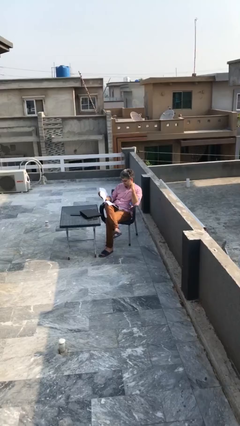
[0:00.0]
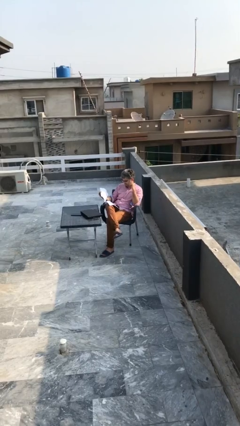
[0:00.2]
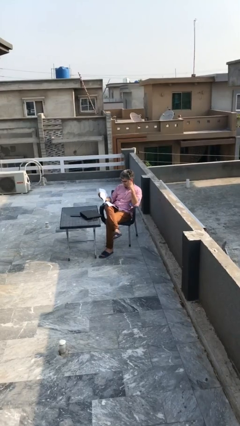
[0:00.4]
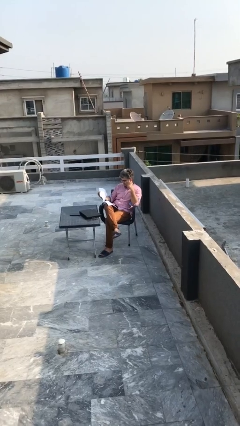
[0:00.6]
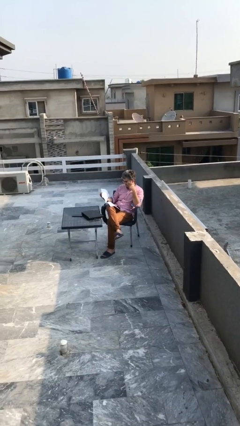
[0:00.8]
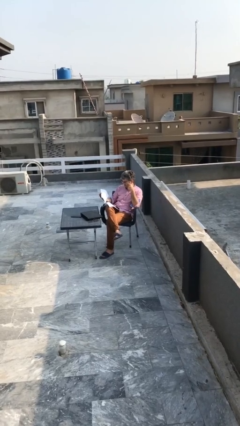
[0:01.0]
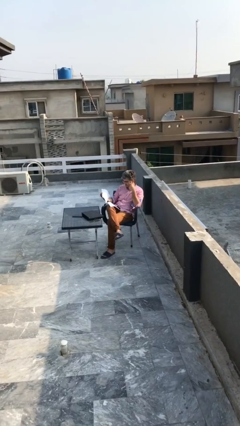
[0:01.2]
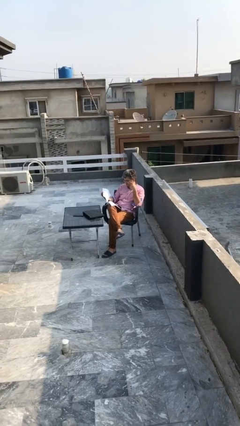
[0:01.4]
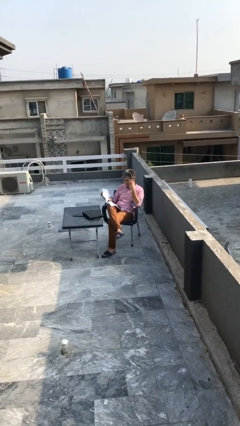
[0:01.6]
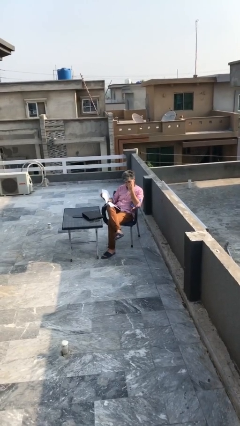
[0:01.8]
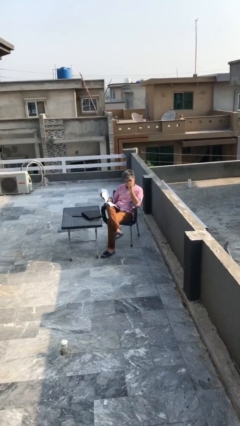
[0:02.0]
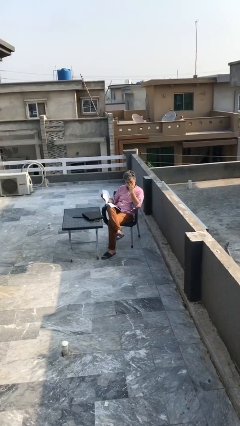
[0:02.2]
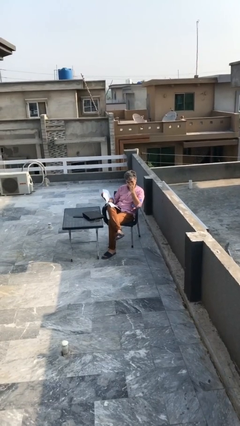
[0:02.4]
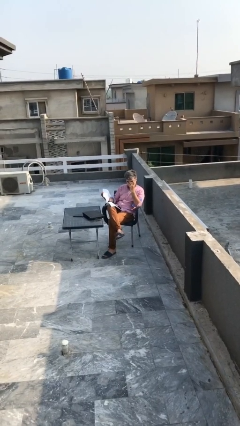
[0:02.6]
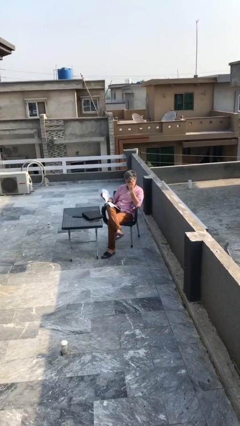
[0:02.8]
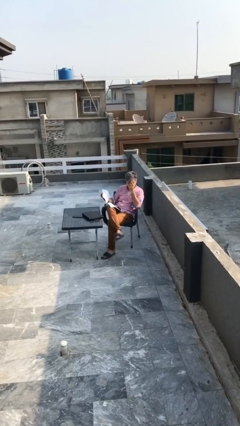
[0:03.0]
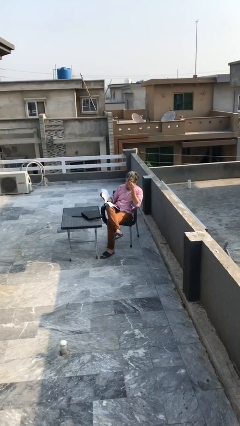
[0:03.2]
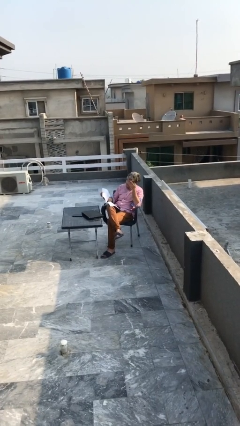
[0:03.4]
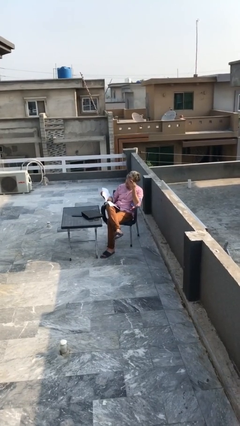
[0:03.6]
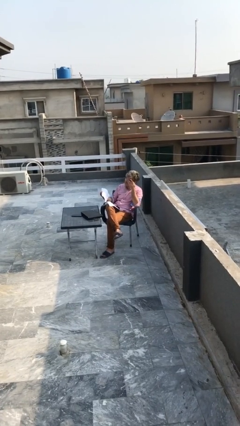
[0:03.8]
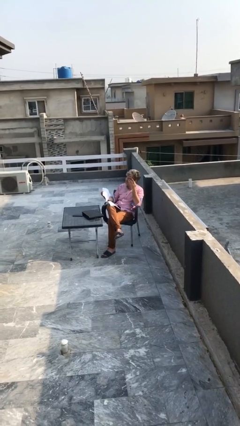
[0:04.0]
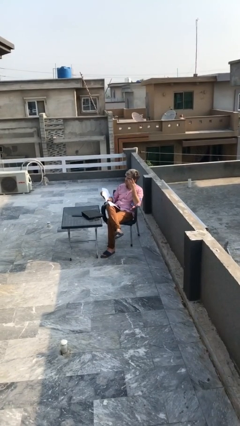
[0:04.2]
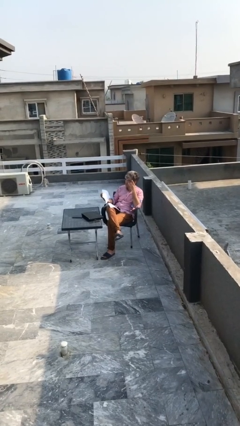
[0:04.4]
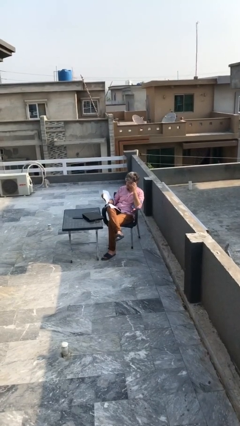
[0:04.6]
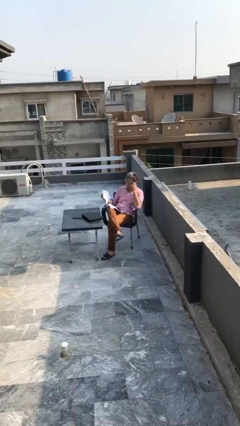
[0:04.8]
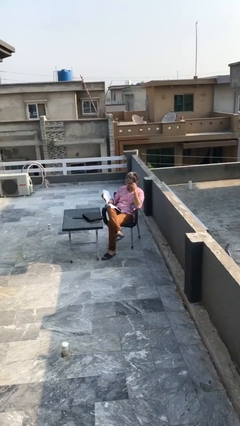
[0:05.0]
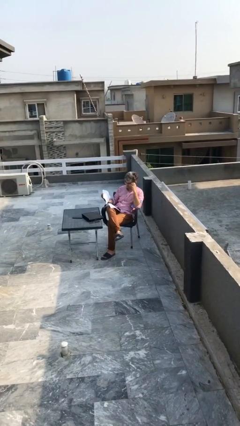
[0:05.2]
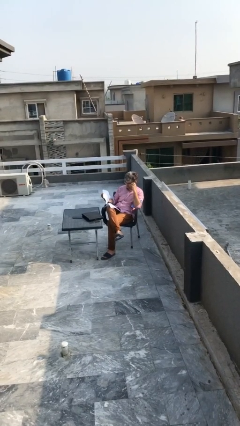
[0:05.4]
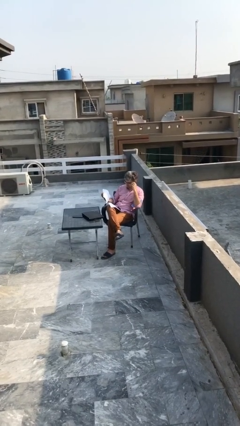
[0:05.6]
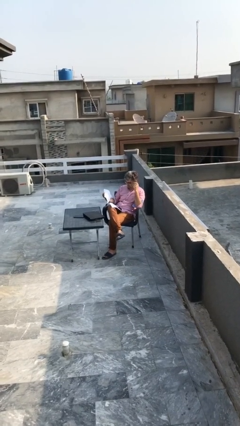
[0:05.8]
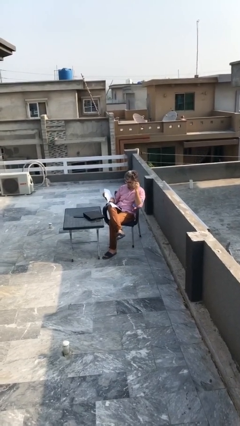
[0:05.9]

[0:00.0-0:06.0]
person reads document

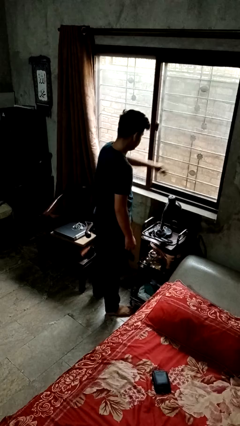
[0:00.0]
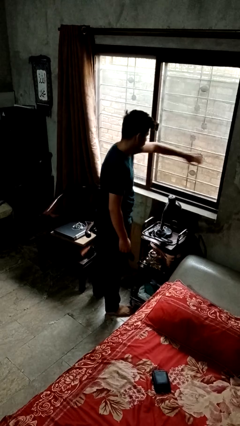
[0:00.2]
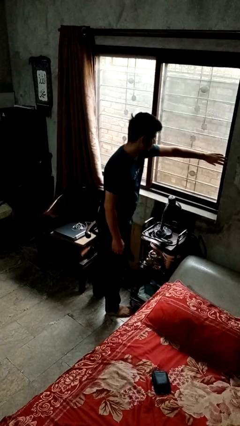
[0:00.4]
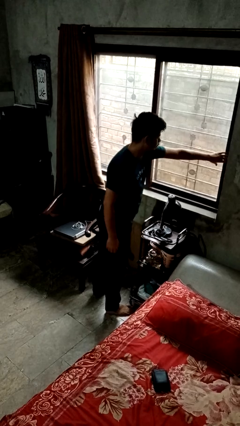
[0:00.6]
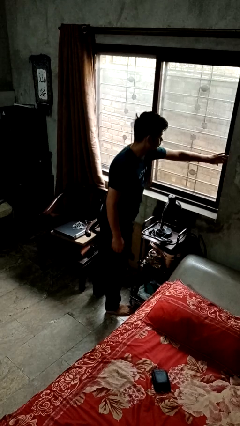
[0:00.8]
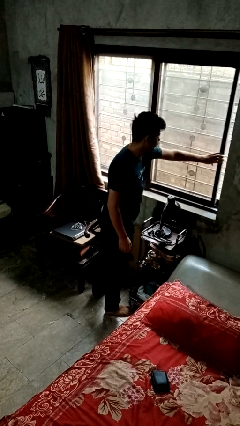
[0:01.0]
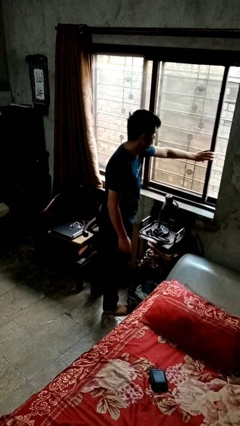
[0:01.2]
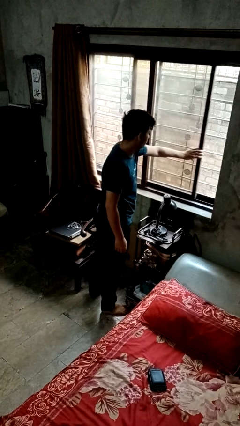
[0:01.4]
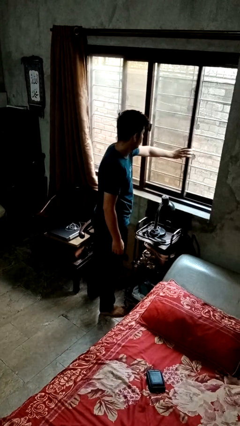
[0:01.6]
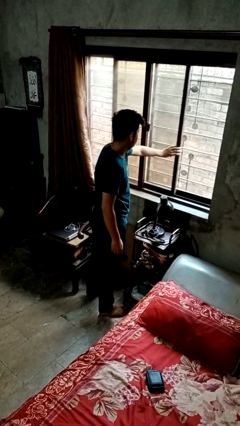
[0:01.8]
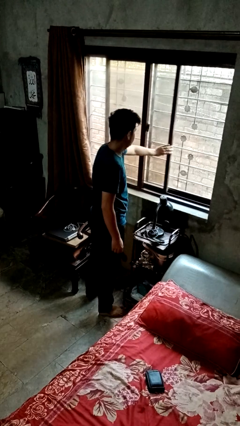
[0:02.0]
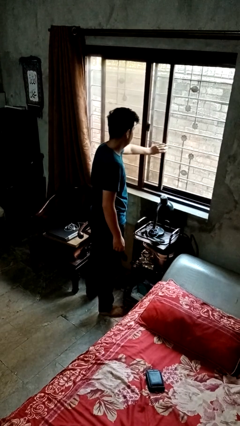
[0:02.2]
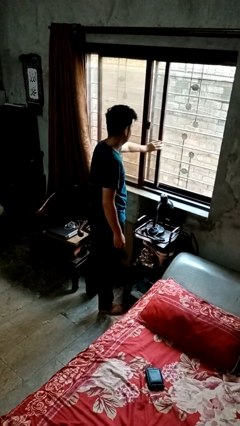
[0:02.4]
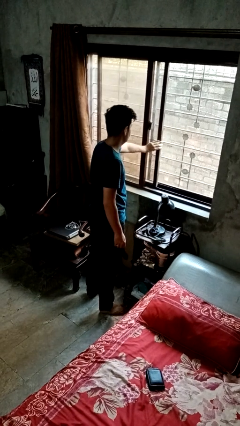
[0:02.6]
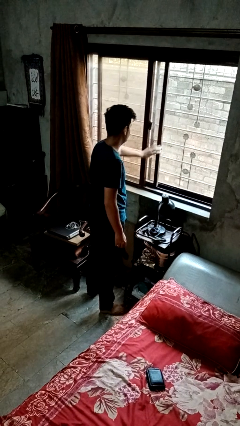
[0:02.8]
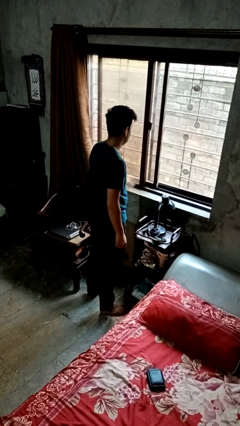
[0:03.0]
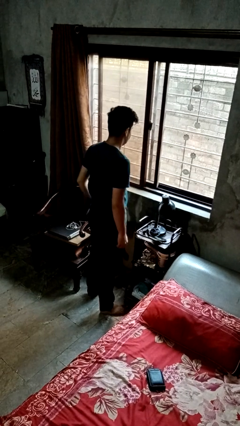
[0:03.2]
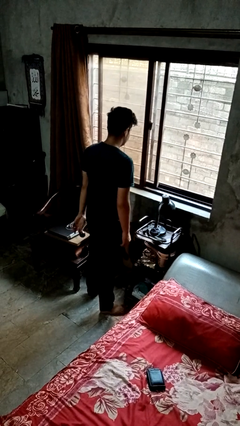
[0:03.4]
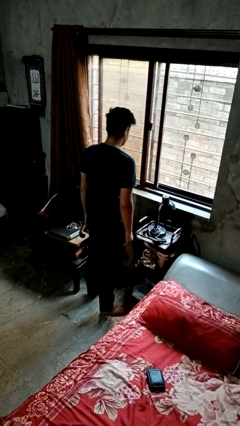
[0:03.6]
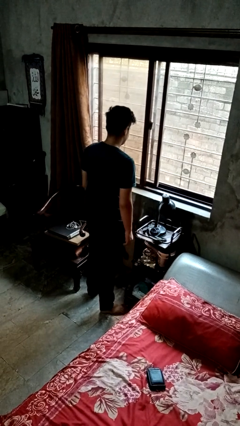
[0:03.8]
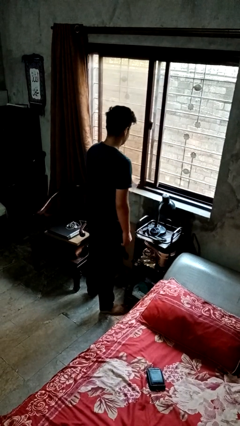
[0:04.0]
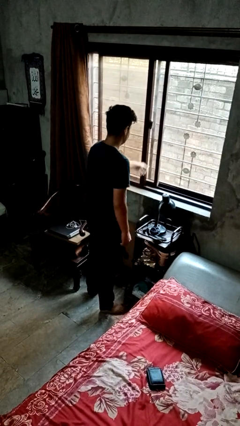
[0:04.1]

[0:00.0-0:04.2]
person opens home window

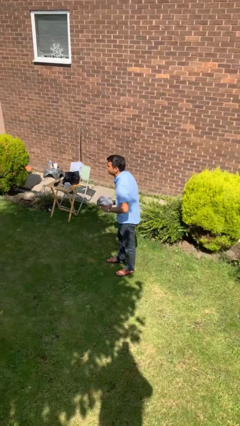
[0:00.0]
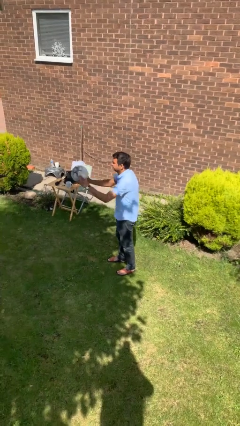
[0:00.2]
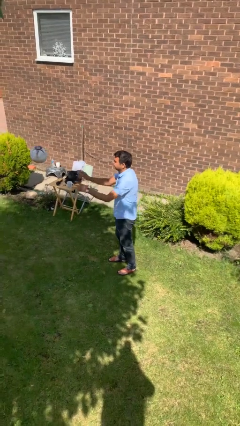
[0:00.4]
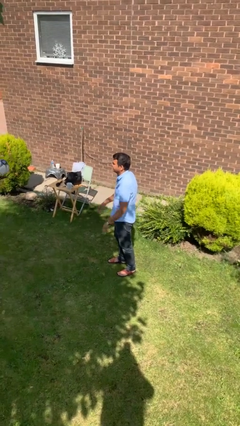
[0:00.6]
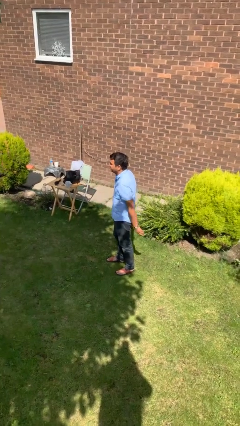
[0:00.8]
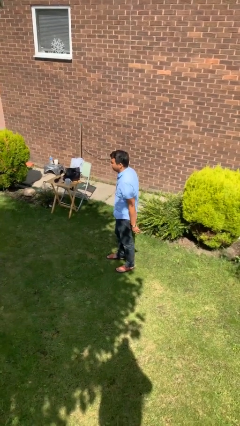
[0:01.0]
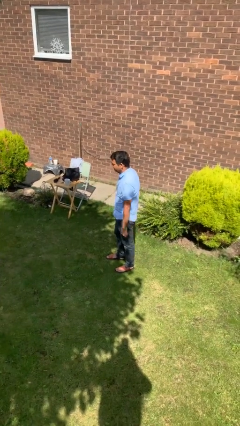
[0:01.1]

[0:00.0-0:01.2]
person throws object to person

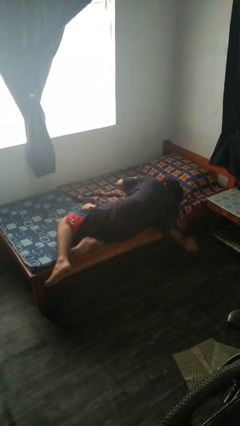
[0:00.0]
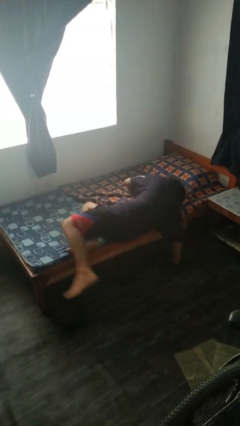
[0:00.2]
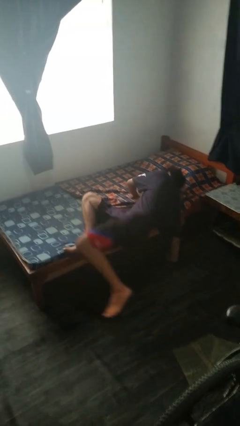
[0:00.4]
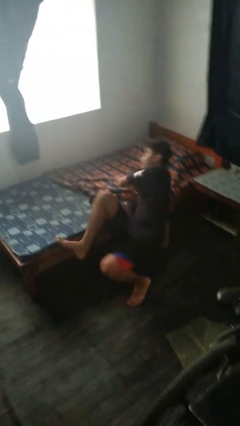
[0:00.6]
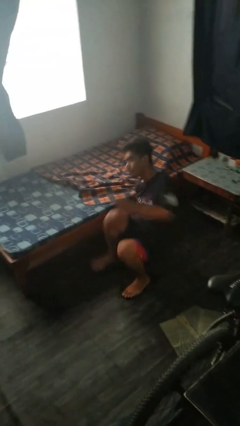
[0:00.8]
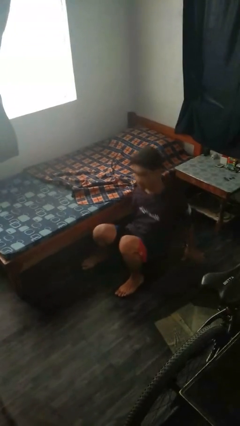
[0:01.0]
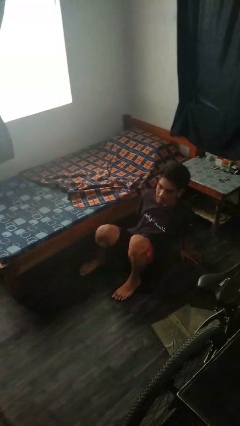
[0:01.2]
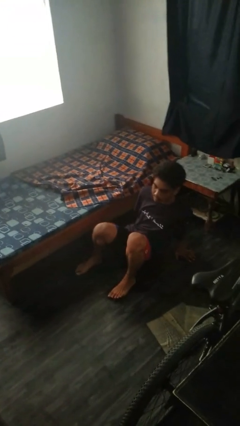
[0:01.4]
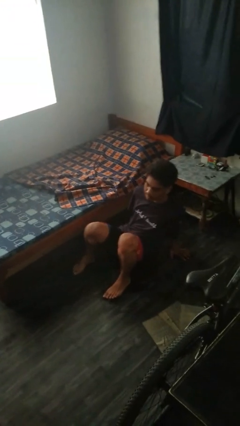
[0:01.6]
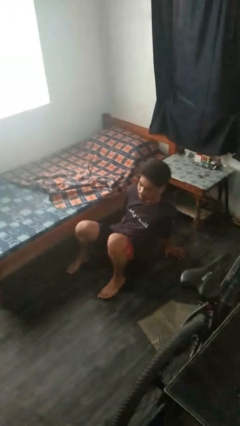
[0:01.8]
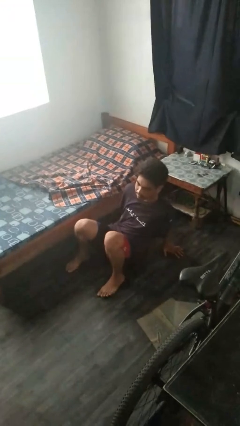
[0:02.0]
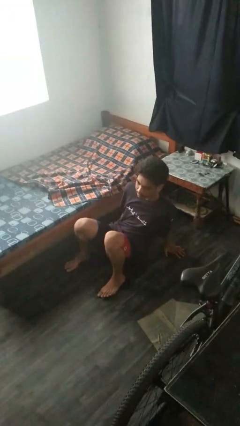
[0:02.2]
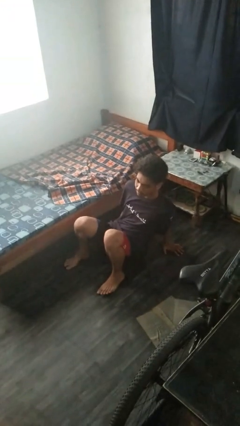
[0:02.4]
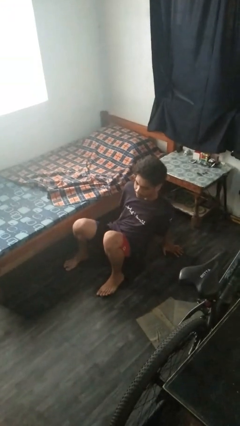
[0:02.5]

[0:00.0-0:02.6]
person falls from bed

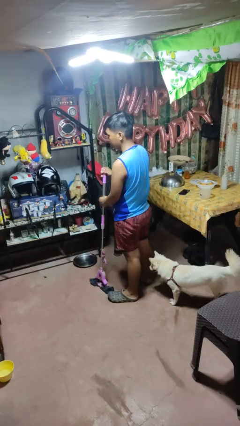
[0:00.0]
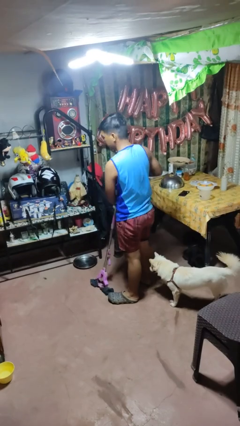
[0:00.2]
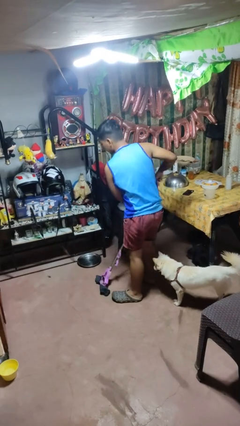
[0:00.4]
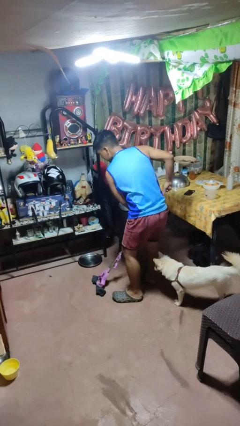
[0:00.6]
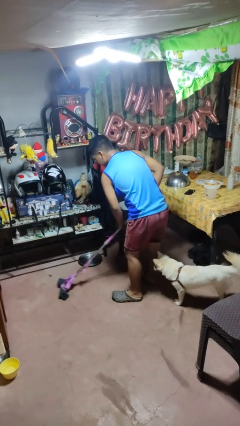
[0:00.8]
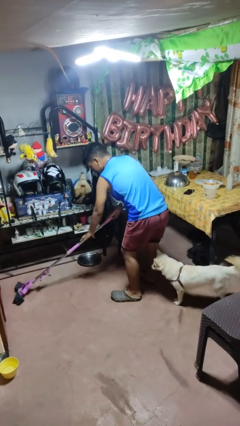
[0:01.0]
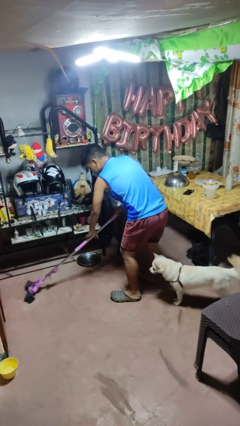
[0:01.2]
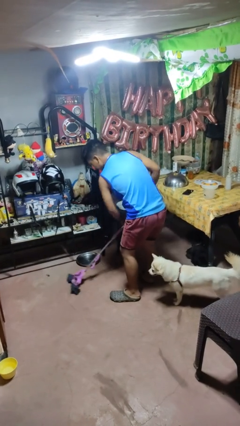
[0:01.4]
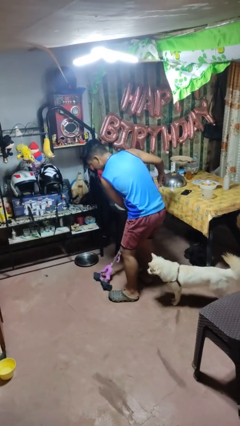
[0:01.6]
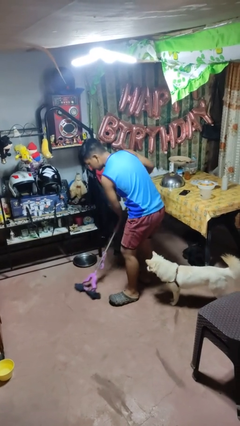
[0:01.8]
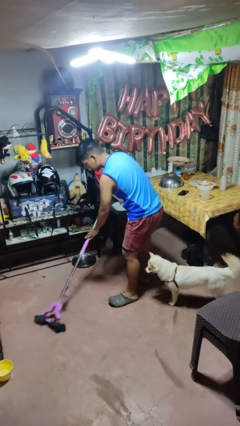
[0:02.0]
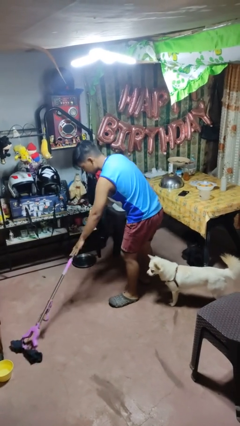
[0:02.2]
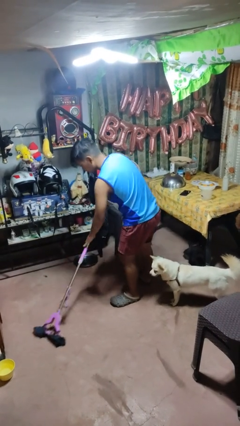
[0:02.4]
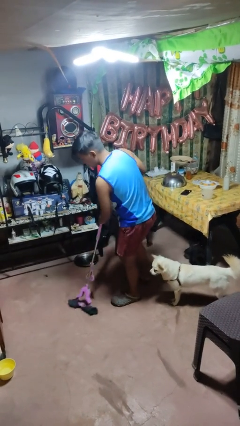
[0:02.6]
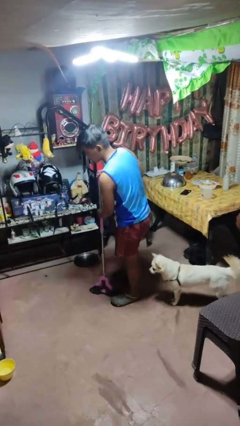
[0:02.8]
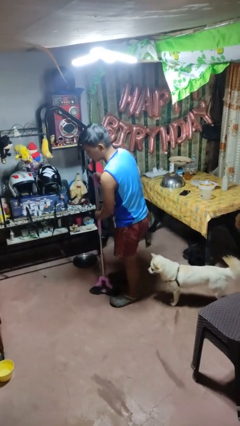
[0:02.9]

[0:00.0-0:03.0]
person mops

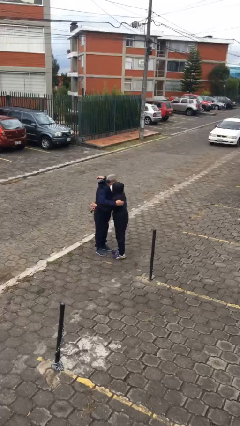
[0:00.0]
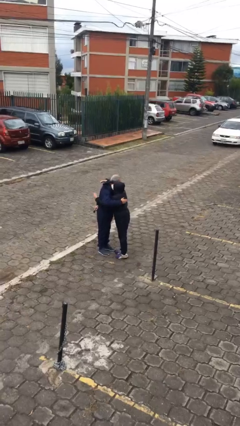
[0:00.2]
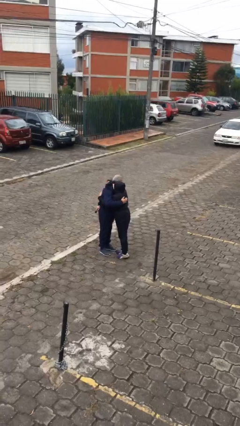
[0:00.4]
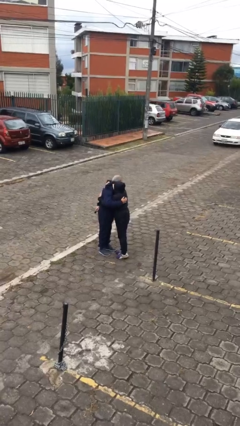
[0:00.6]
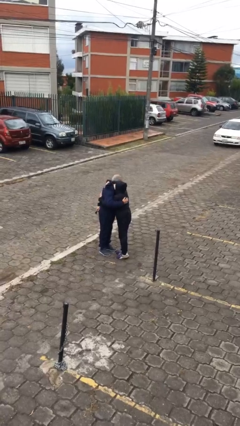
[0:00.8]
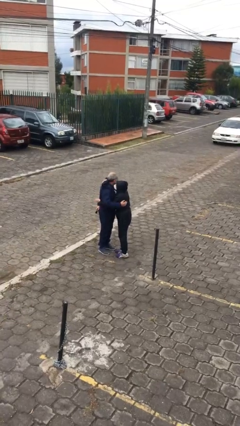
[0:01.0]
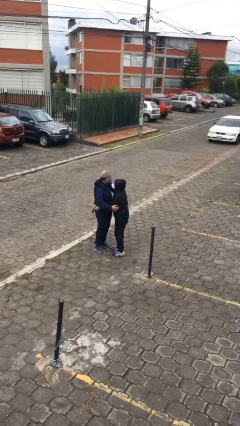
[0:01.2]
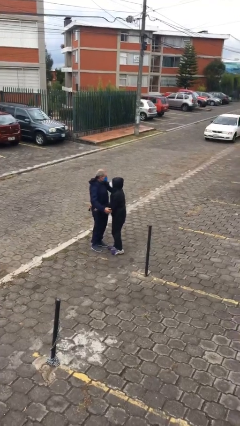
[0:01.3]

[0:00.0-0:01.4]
person embraces person
